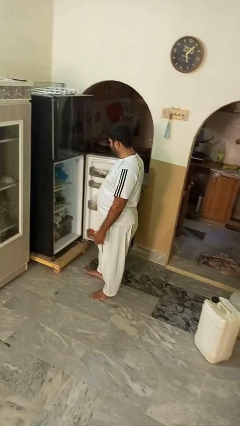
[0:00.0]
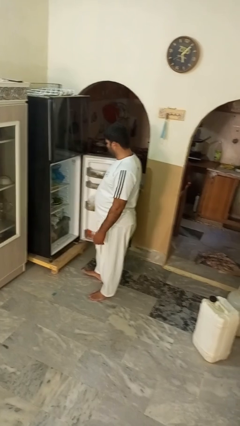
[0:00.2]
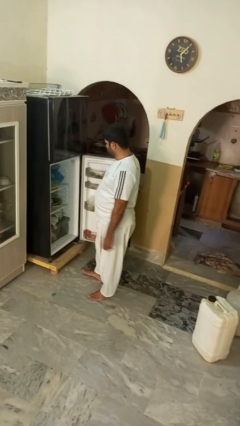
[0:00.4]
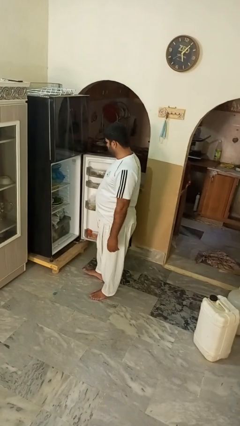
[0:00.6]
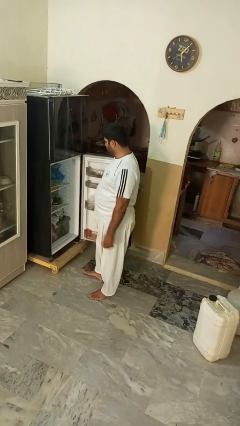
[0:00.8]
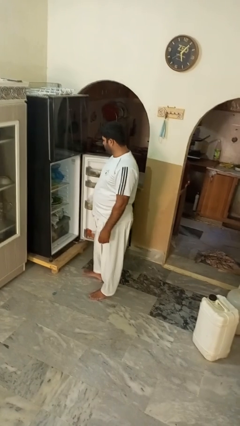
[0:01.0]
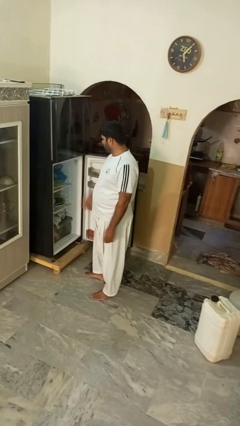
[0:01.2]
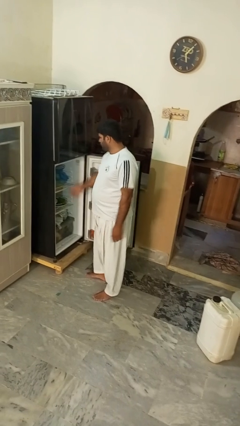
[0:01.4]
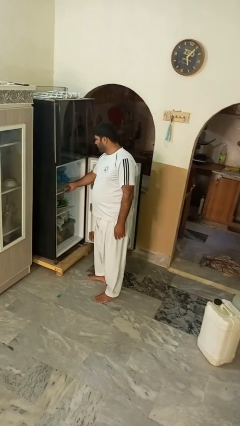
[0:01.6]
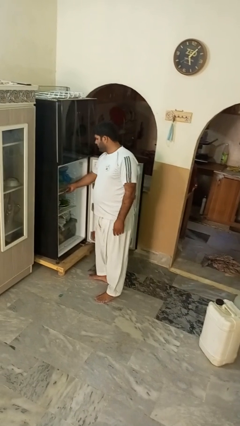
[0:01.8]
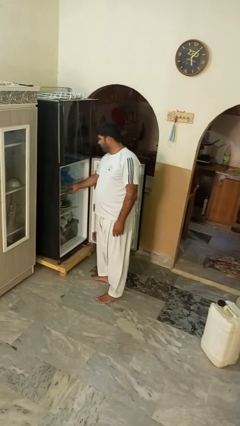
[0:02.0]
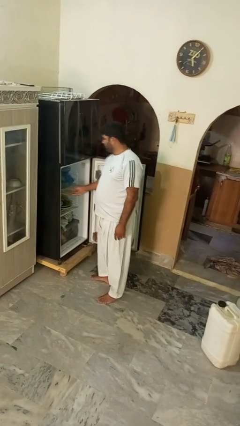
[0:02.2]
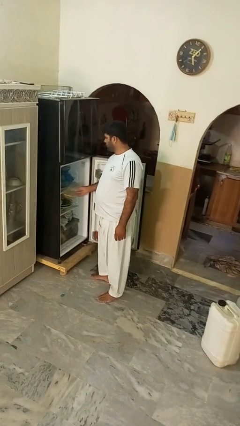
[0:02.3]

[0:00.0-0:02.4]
person takes object from refrigerator

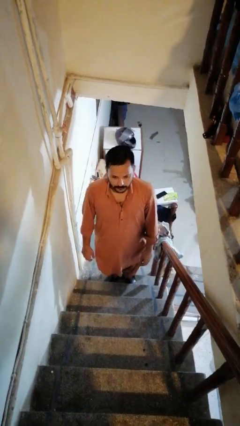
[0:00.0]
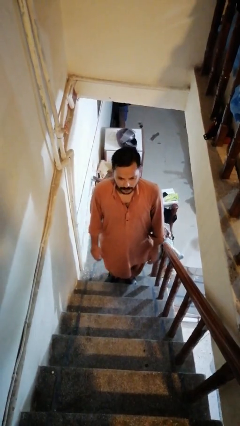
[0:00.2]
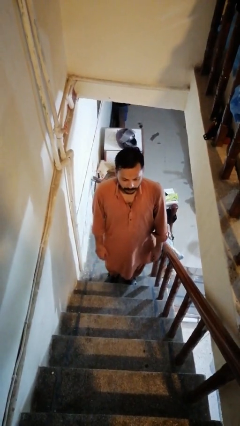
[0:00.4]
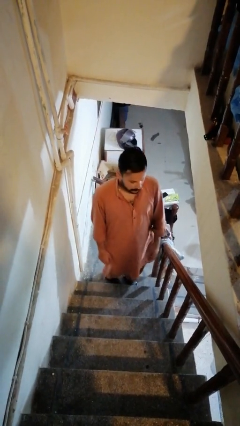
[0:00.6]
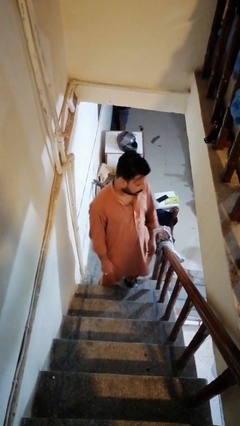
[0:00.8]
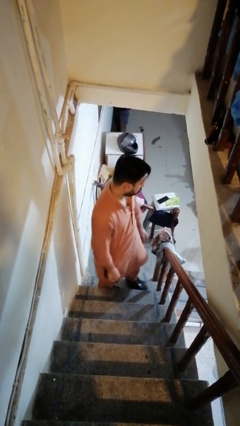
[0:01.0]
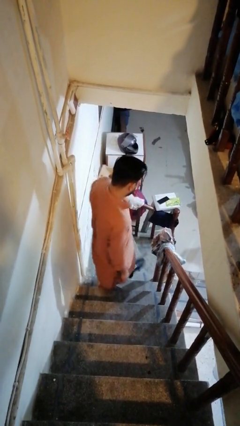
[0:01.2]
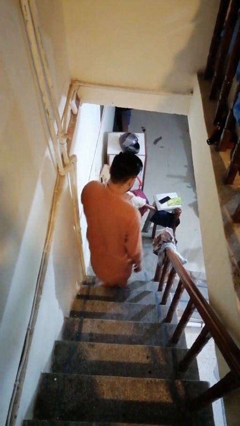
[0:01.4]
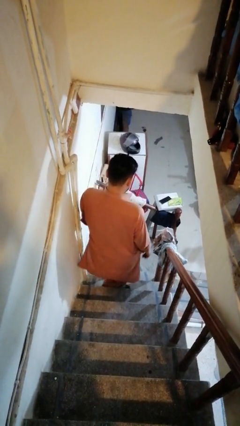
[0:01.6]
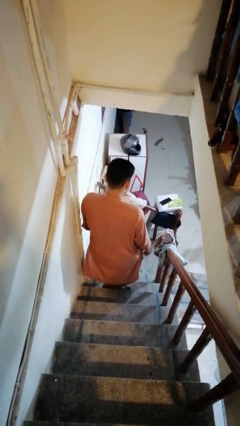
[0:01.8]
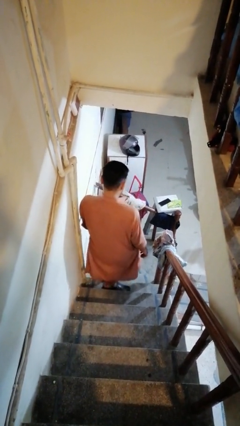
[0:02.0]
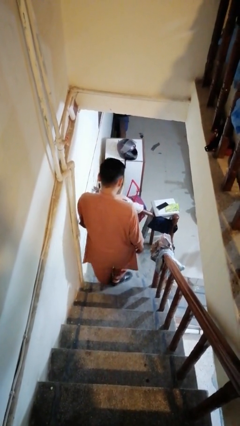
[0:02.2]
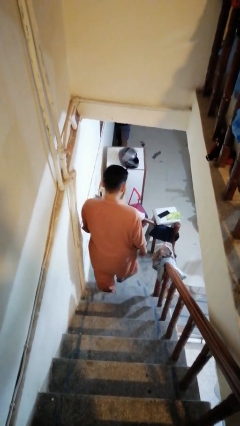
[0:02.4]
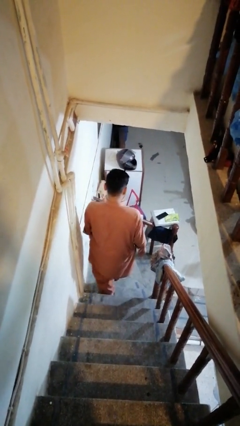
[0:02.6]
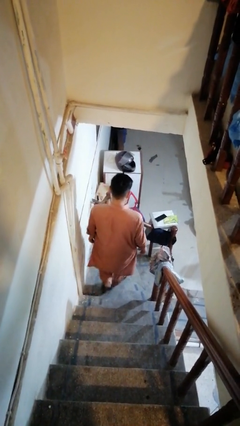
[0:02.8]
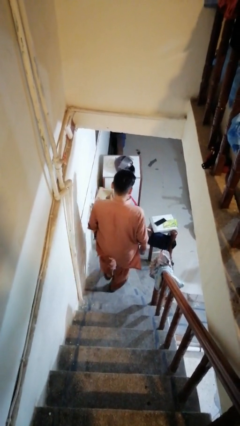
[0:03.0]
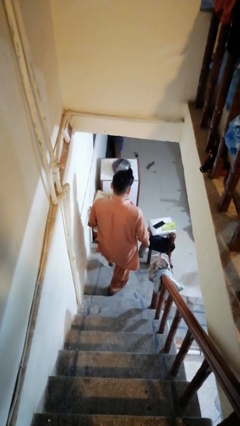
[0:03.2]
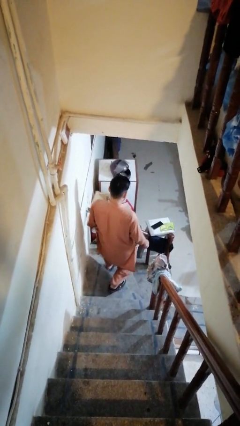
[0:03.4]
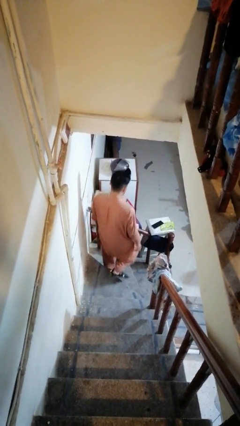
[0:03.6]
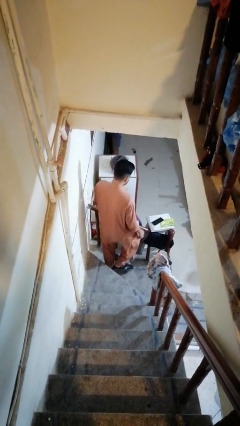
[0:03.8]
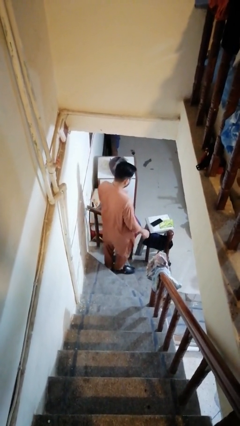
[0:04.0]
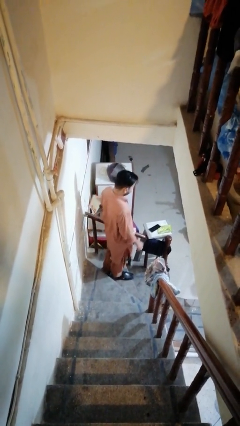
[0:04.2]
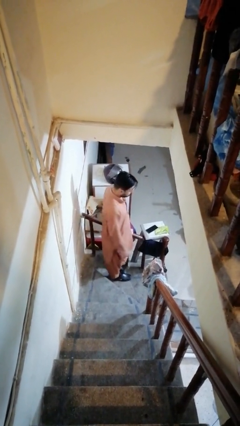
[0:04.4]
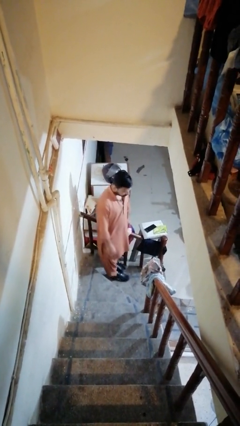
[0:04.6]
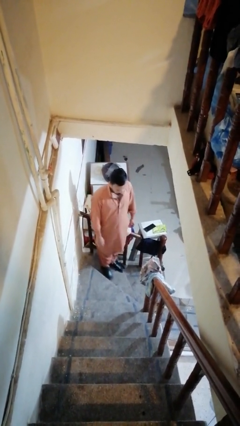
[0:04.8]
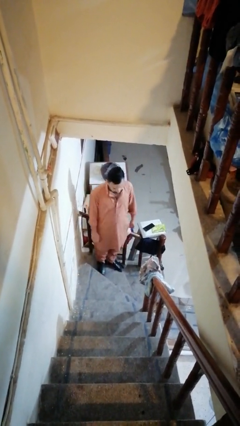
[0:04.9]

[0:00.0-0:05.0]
person climbs down stairs

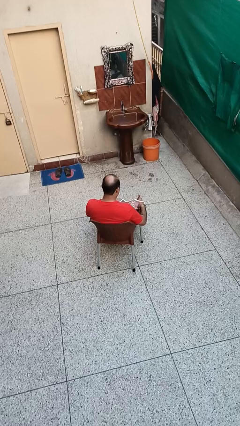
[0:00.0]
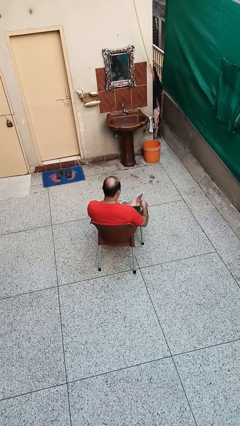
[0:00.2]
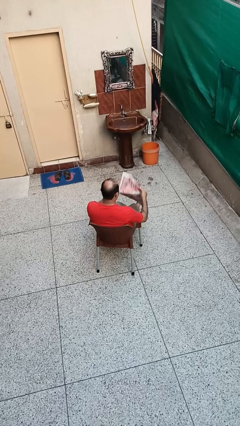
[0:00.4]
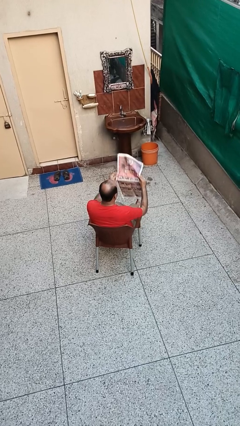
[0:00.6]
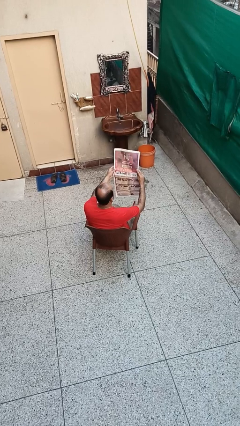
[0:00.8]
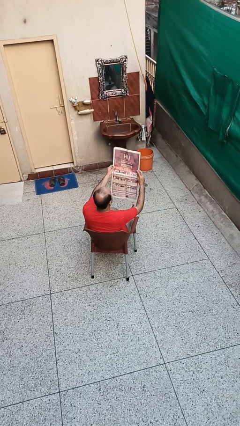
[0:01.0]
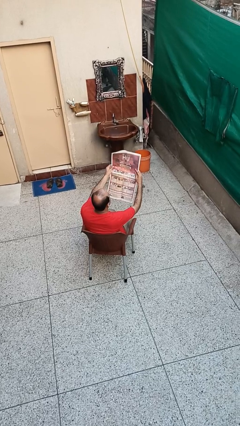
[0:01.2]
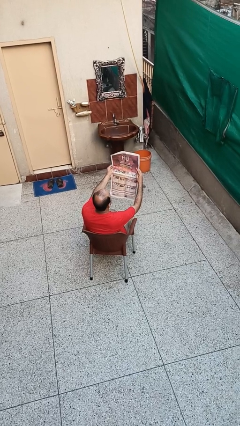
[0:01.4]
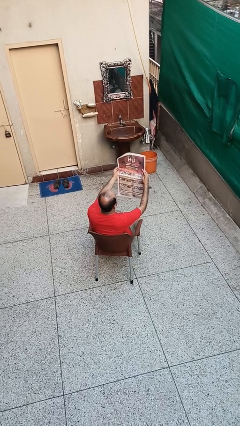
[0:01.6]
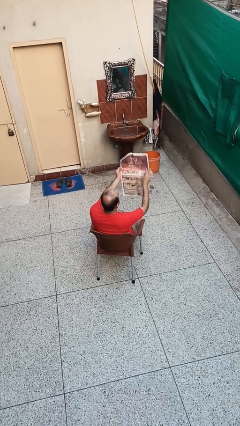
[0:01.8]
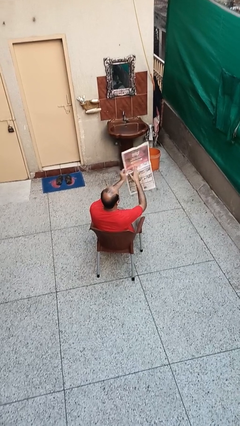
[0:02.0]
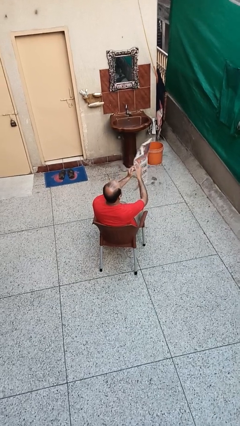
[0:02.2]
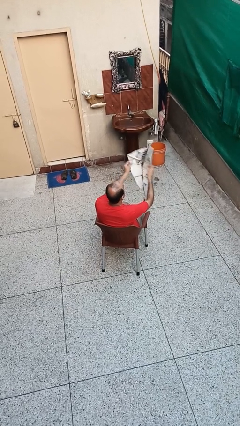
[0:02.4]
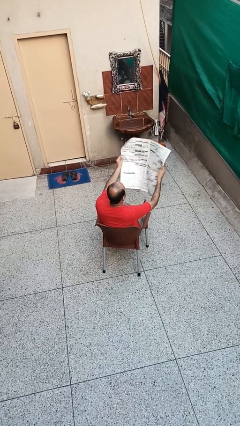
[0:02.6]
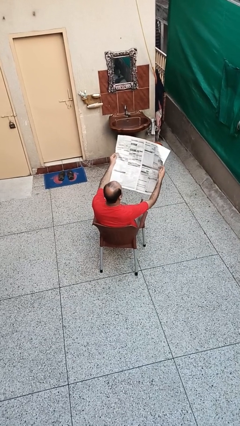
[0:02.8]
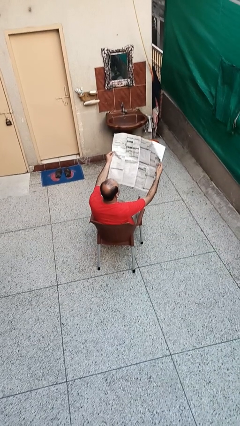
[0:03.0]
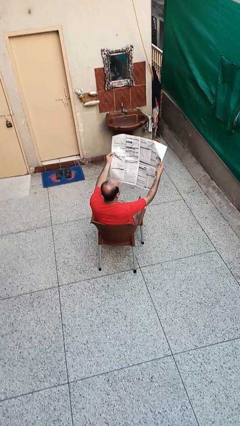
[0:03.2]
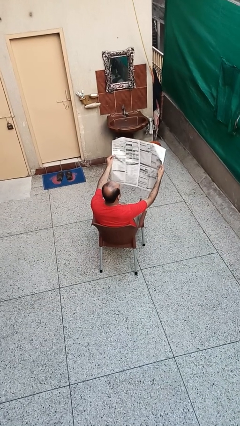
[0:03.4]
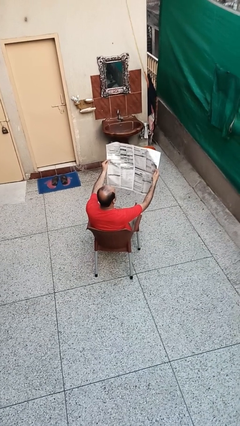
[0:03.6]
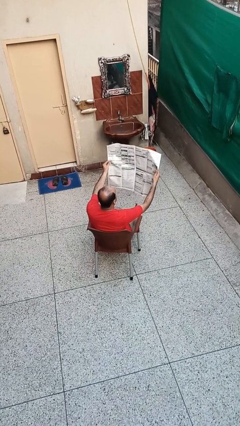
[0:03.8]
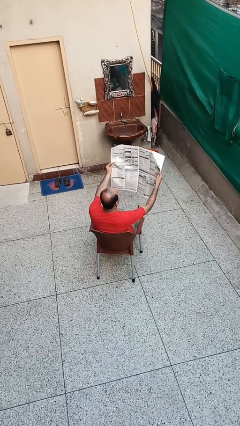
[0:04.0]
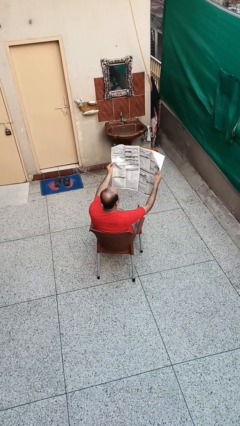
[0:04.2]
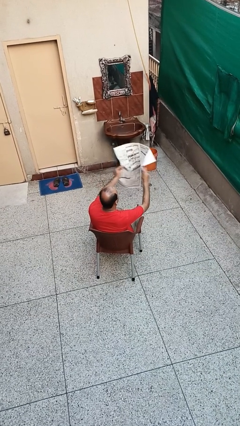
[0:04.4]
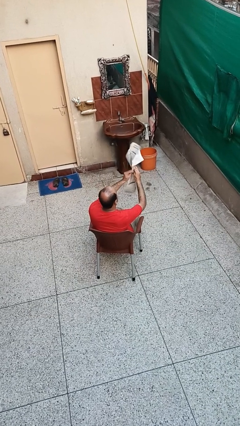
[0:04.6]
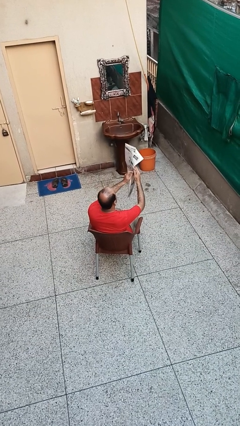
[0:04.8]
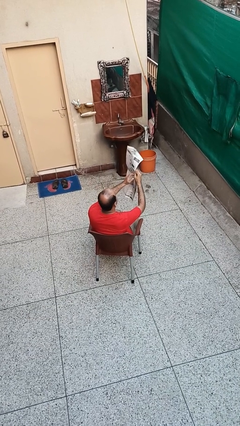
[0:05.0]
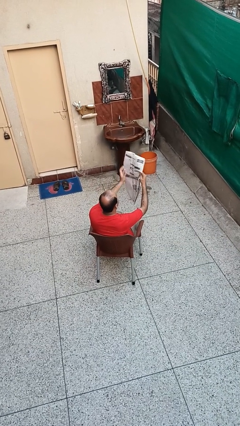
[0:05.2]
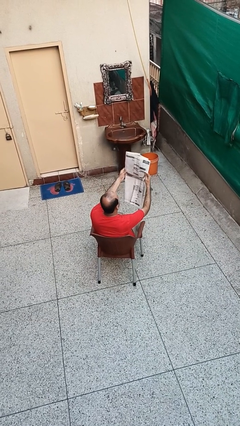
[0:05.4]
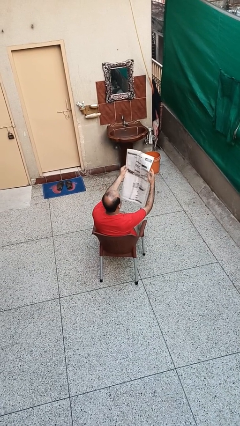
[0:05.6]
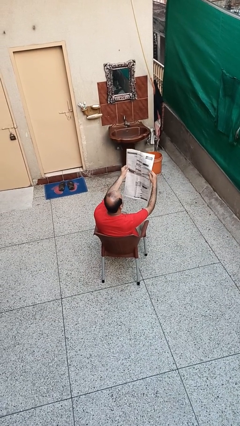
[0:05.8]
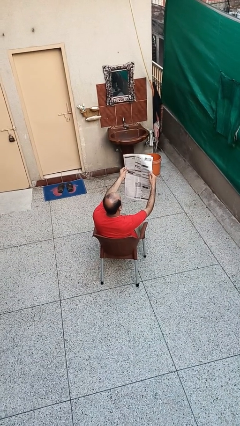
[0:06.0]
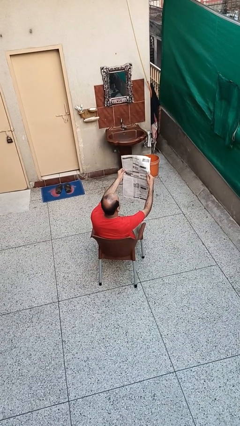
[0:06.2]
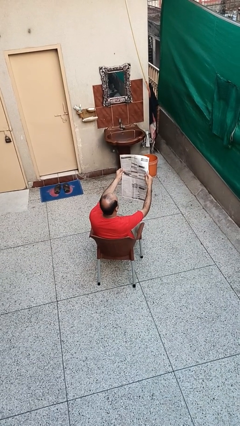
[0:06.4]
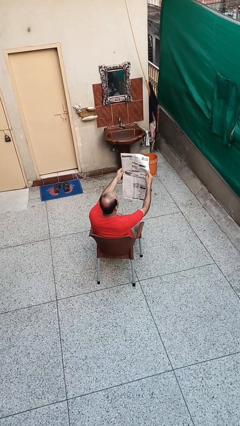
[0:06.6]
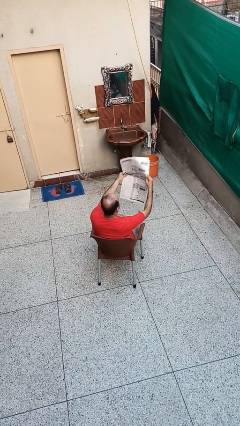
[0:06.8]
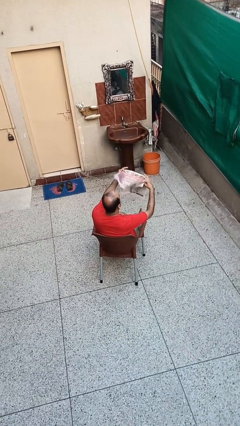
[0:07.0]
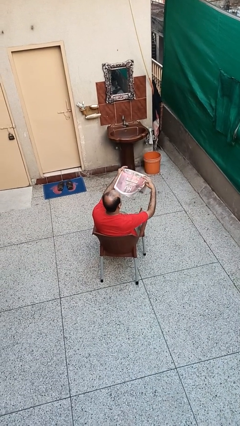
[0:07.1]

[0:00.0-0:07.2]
person reads newspaper

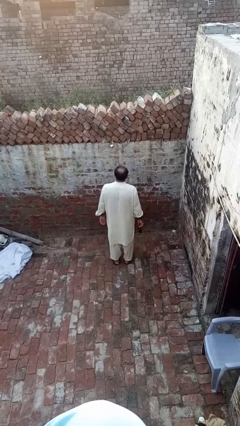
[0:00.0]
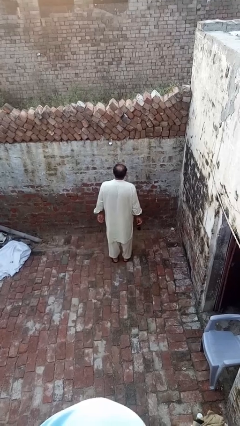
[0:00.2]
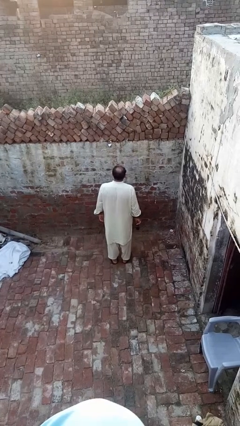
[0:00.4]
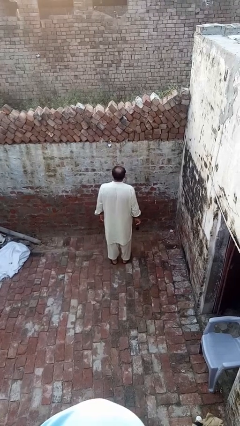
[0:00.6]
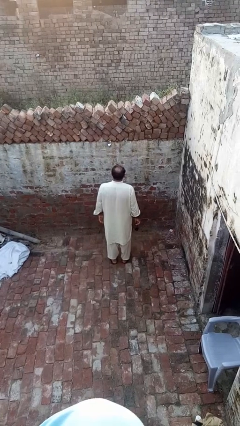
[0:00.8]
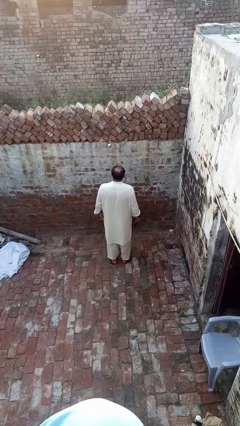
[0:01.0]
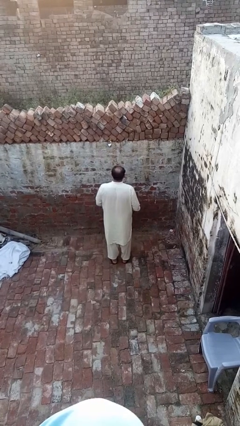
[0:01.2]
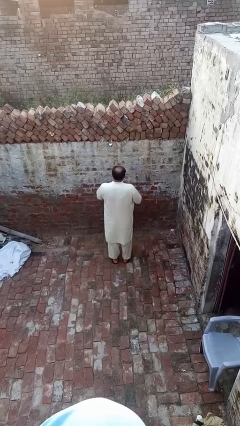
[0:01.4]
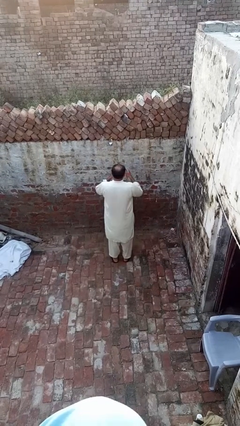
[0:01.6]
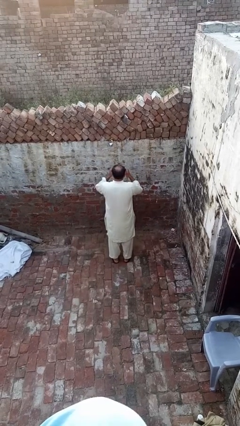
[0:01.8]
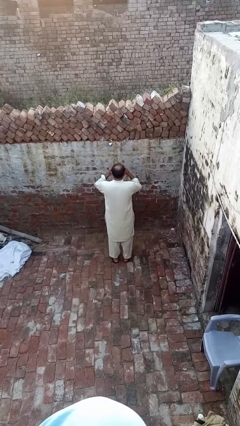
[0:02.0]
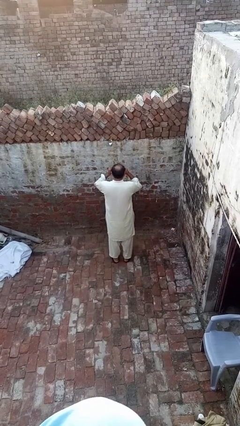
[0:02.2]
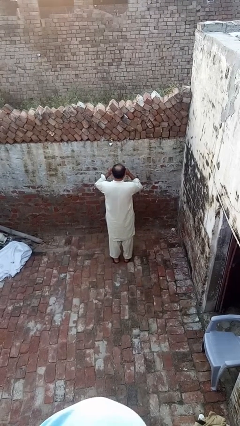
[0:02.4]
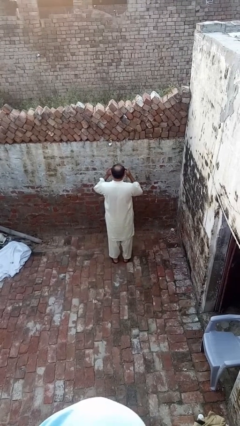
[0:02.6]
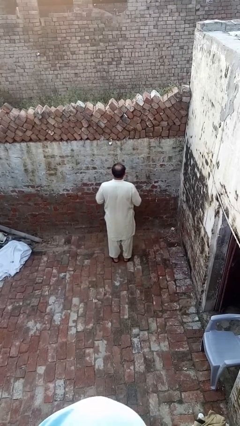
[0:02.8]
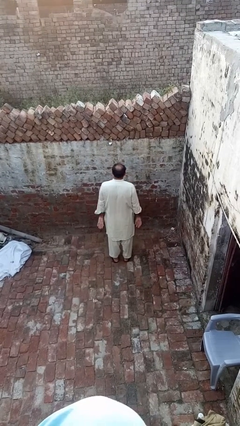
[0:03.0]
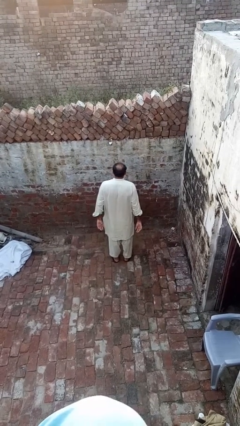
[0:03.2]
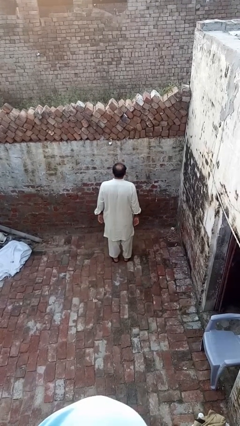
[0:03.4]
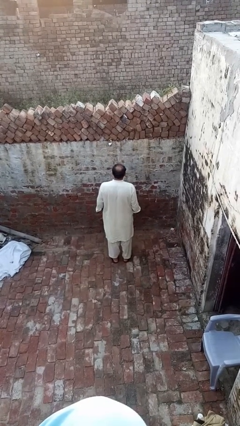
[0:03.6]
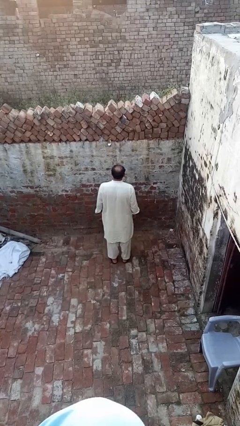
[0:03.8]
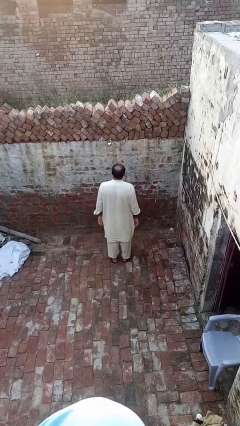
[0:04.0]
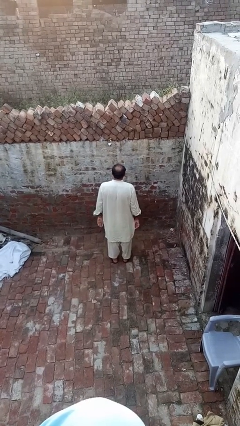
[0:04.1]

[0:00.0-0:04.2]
person puts on sunglasses
